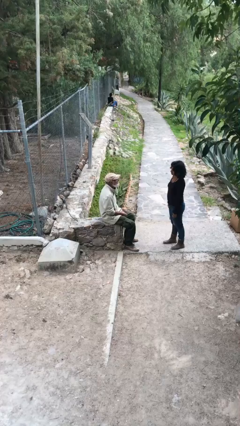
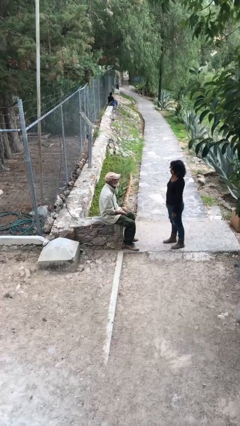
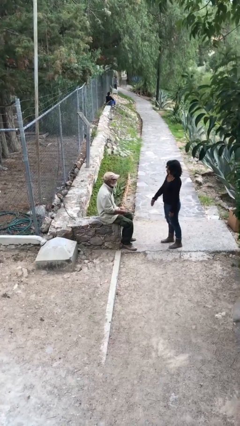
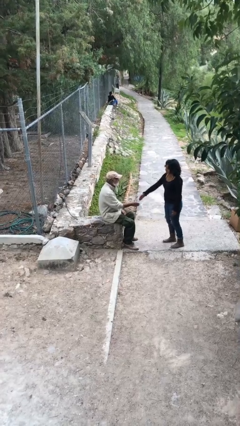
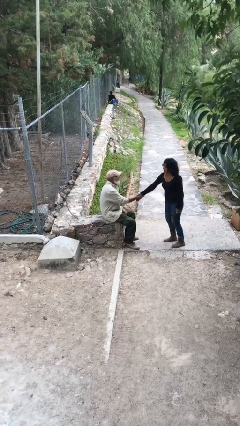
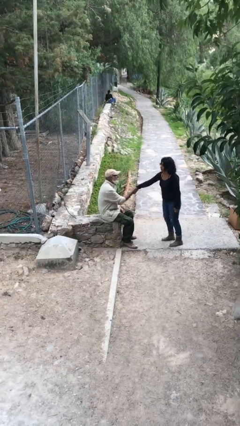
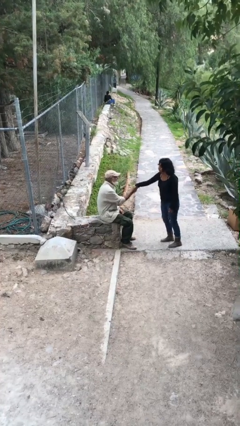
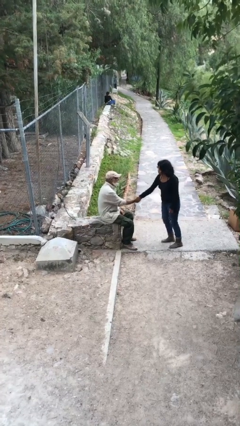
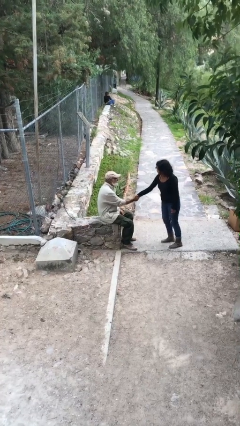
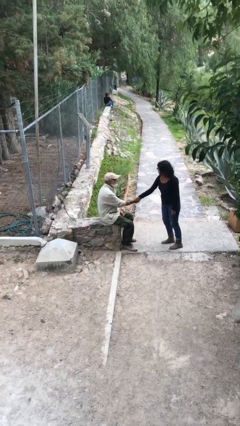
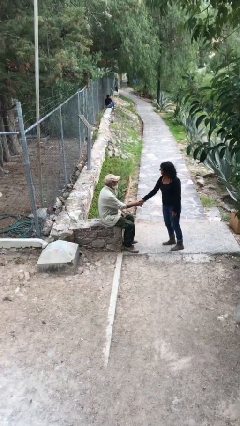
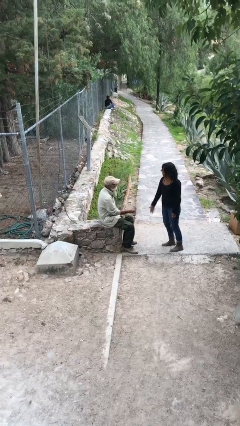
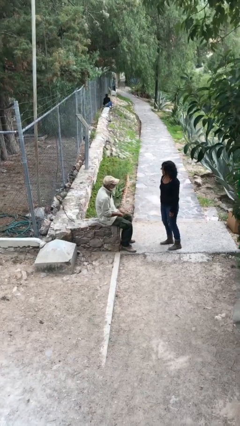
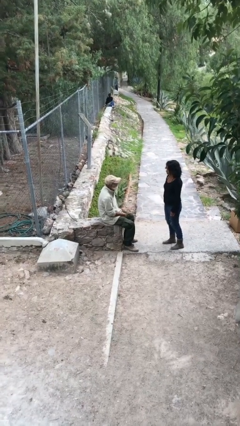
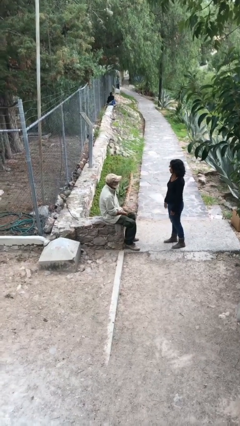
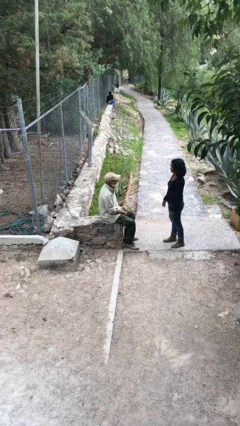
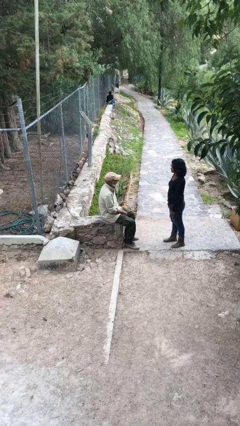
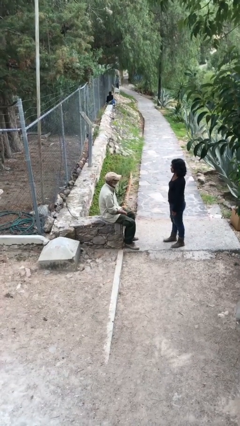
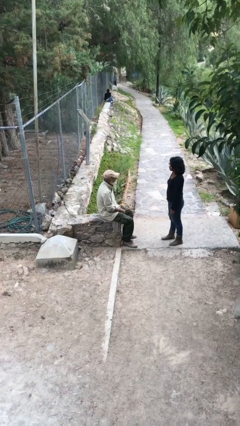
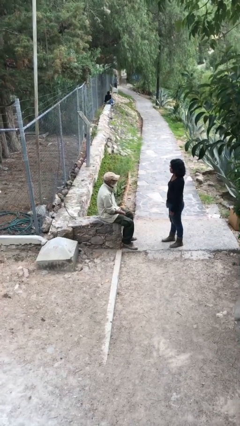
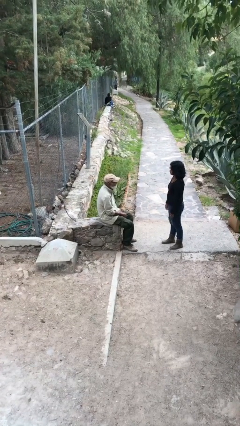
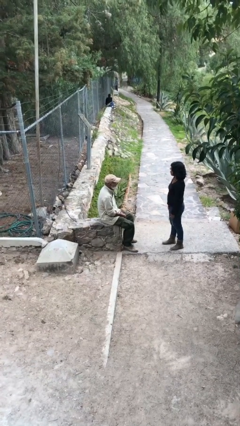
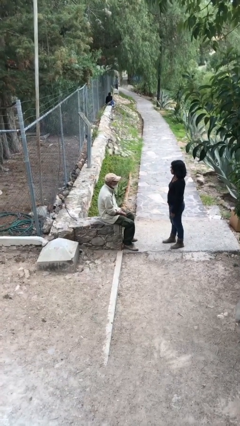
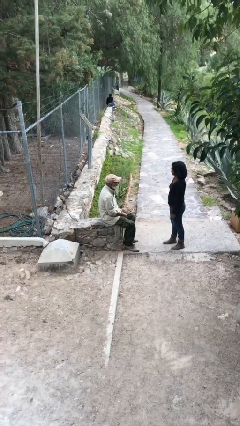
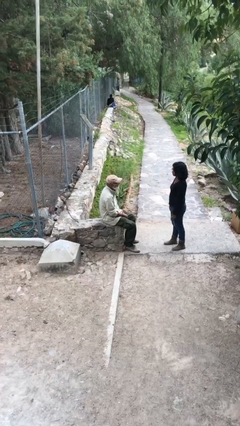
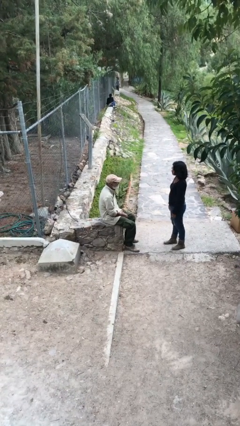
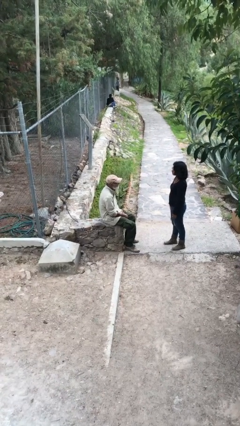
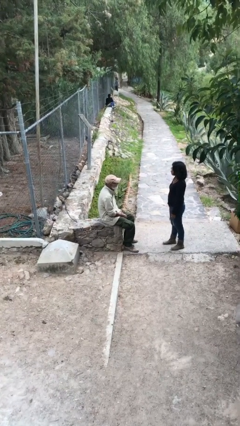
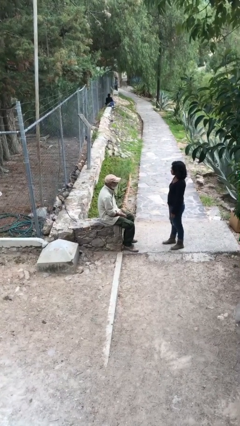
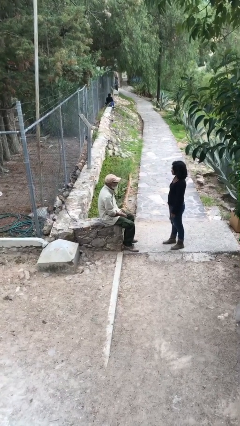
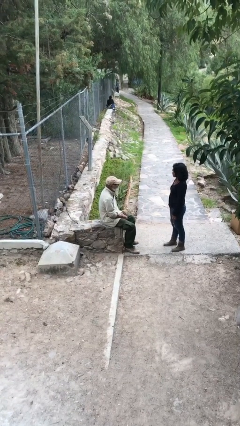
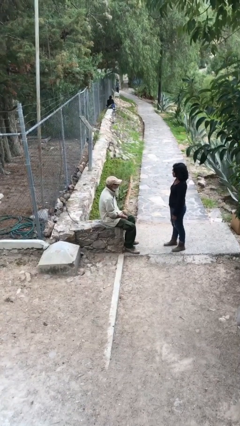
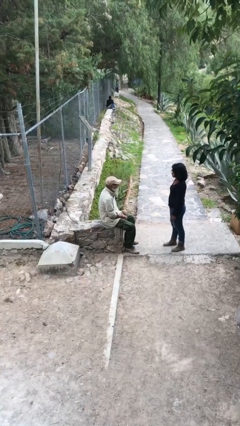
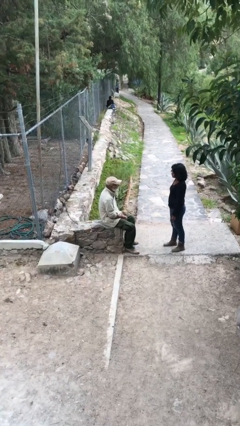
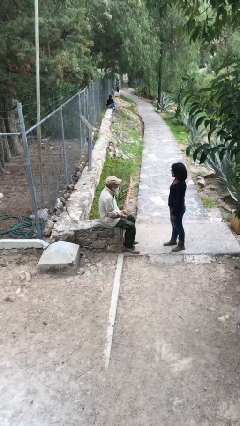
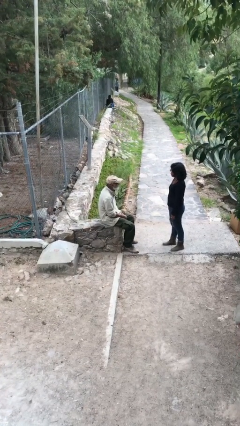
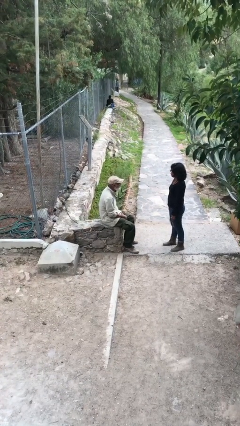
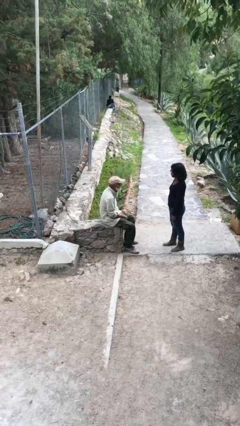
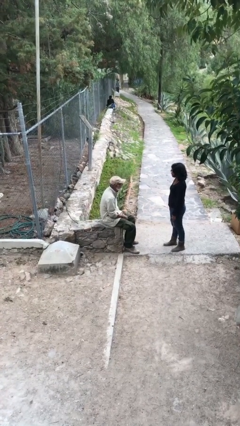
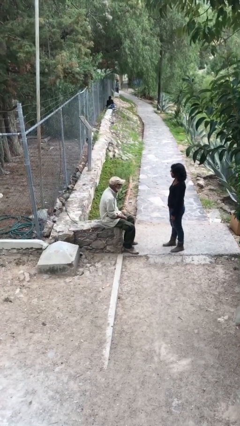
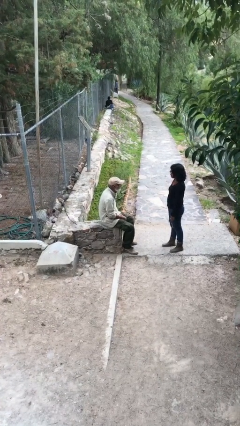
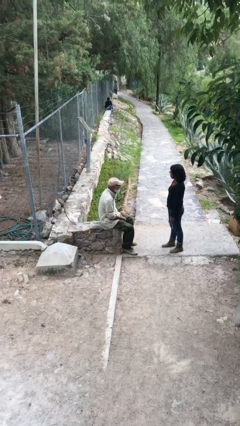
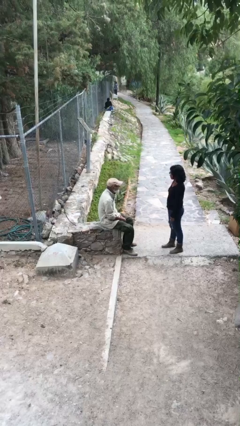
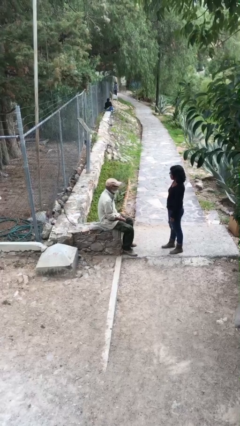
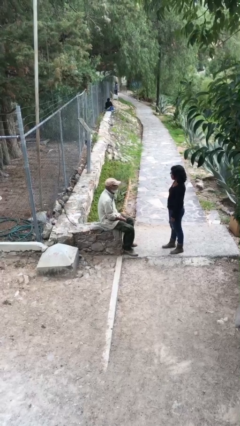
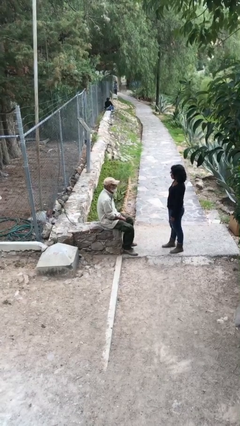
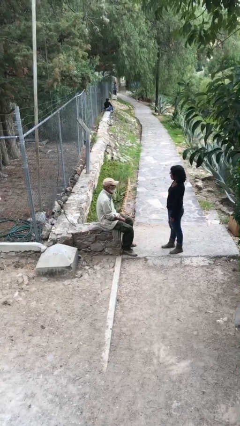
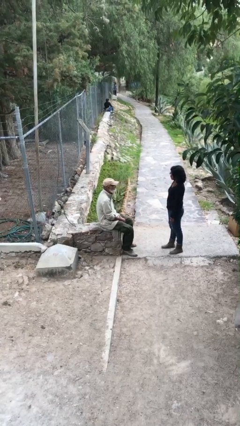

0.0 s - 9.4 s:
person shakes hand

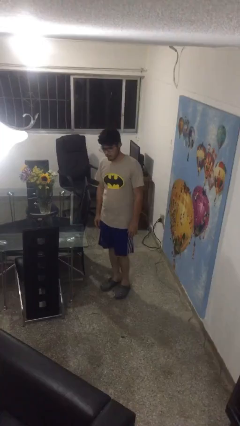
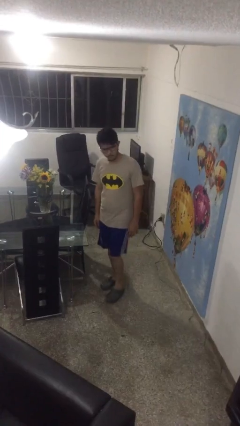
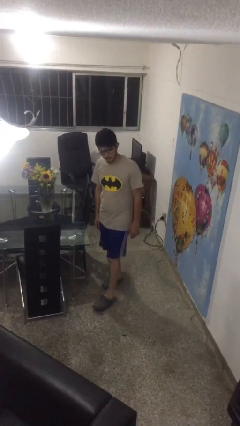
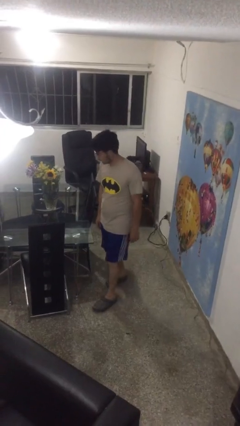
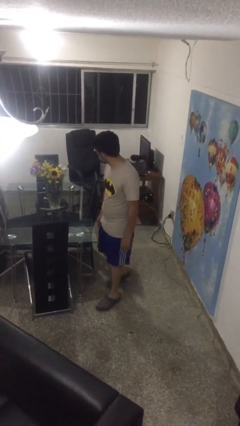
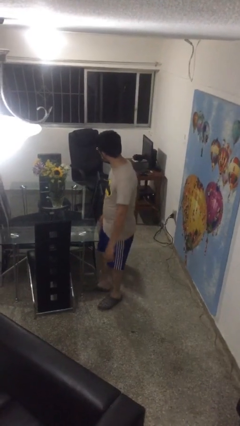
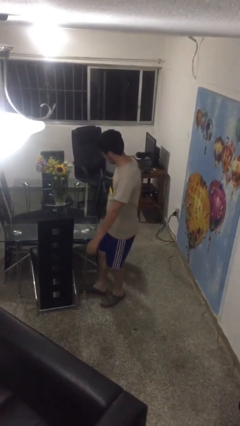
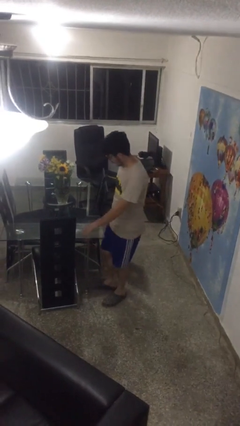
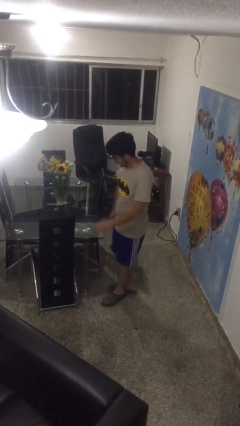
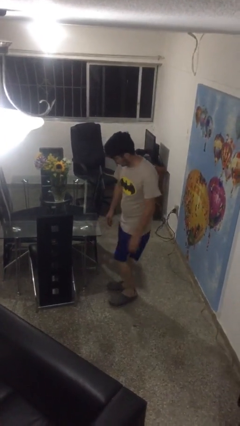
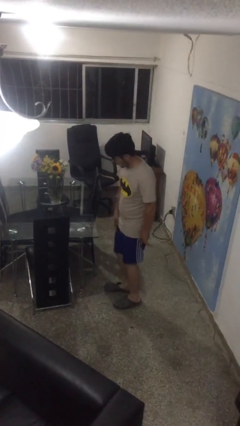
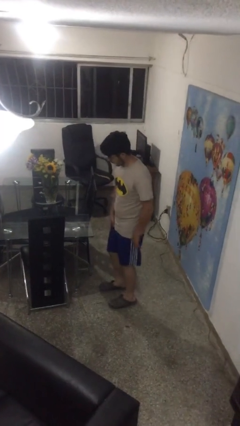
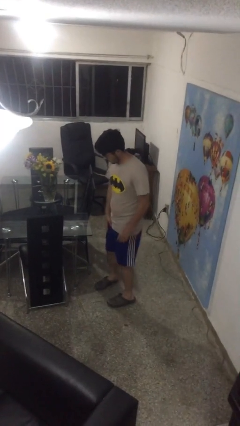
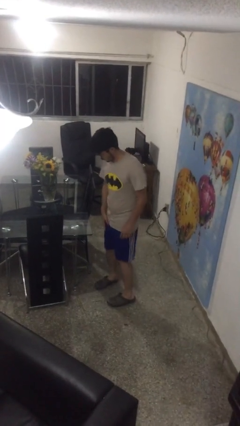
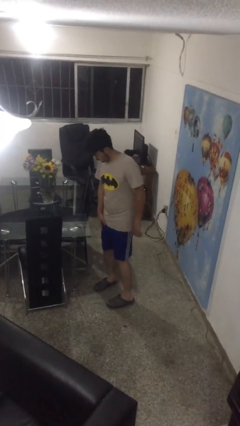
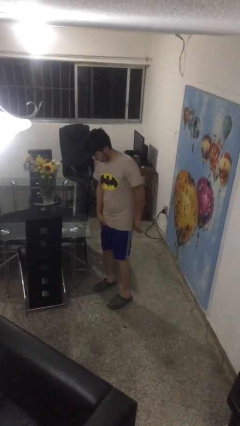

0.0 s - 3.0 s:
person bumps into table

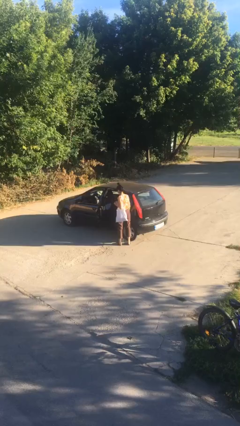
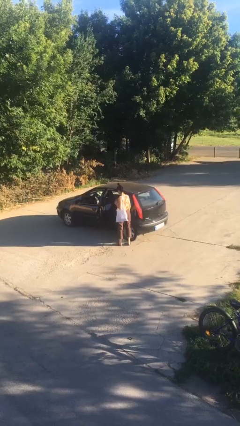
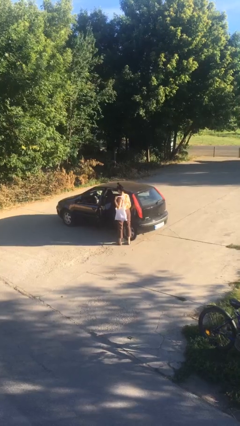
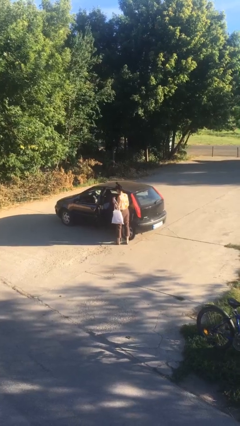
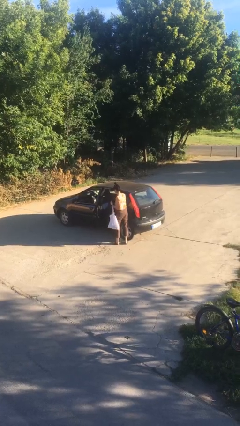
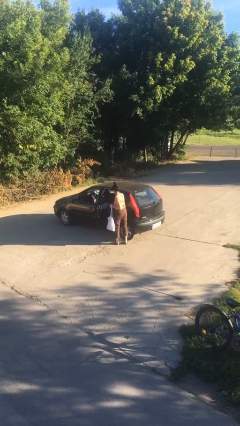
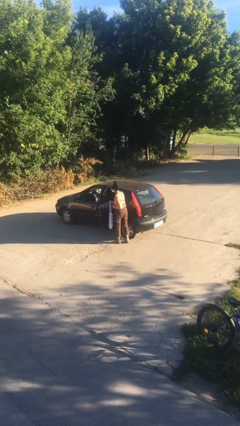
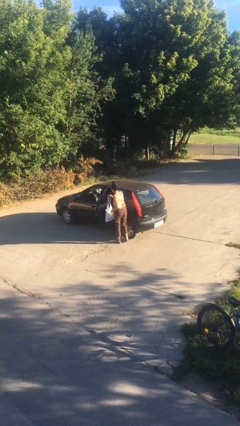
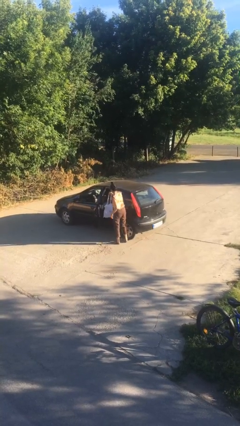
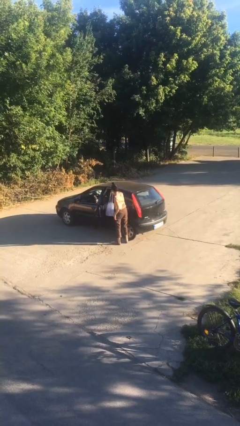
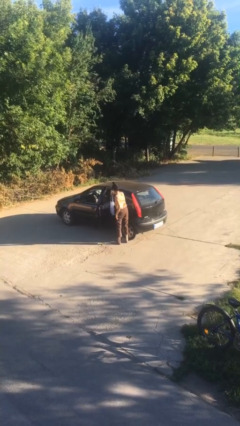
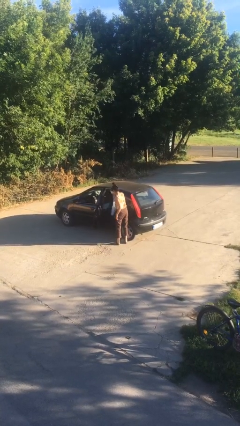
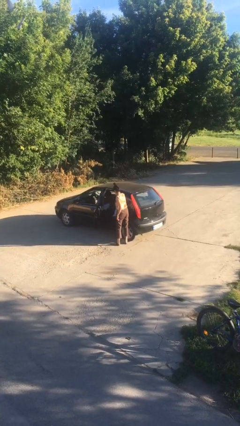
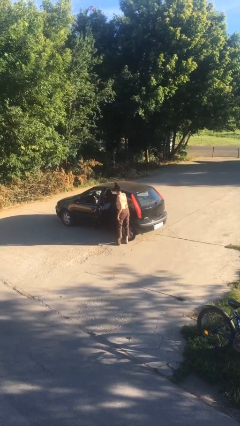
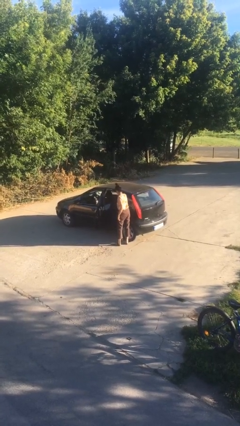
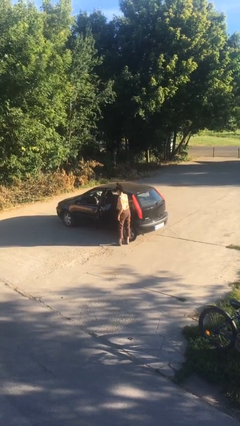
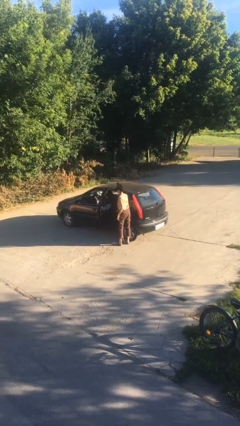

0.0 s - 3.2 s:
person loads car

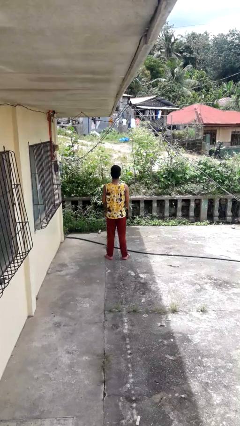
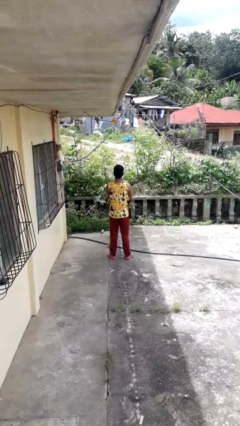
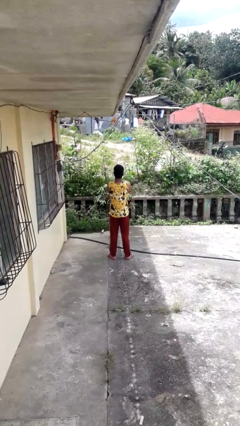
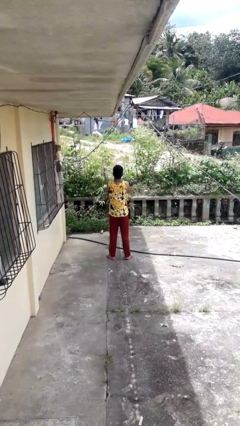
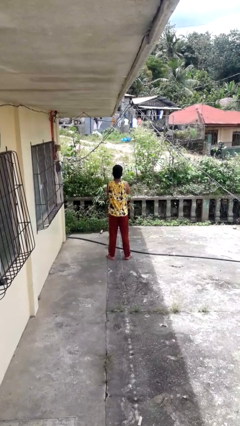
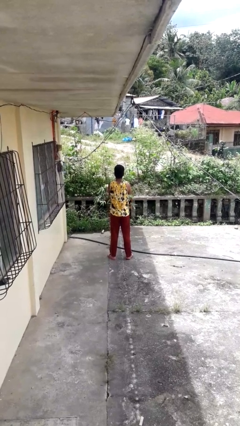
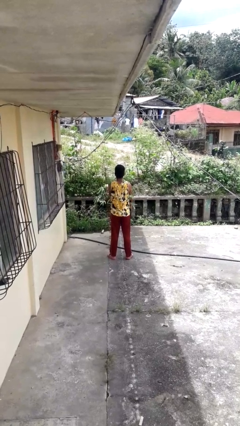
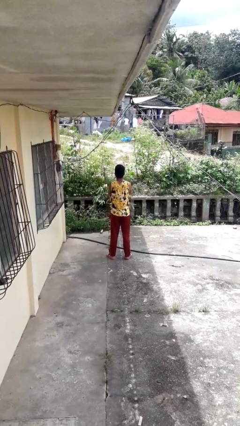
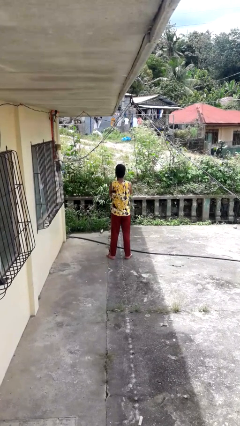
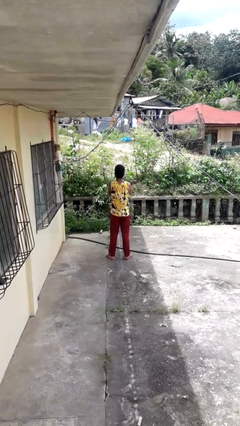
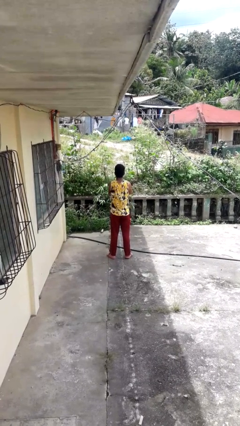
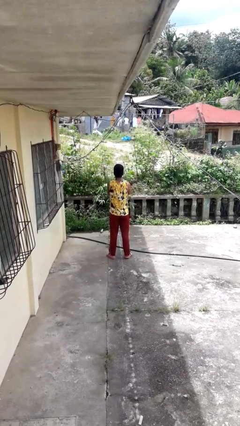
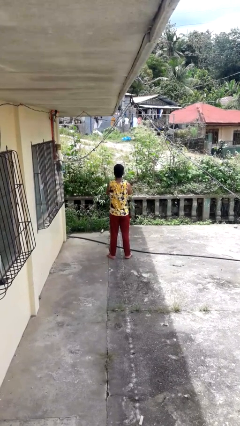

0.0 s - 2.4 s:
person crosses arms
